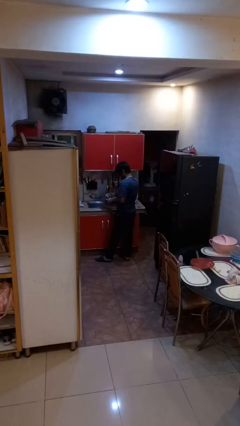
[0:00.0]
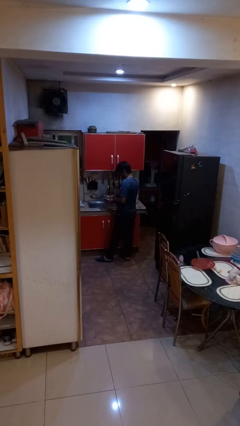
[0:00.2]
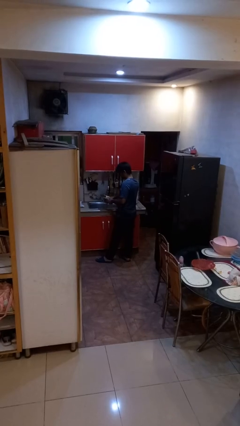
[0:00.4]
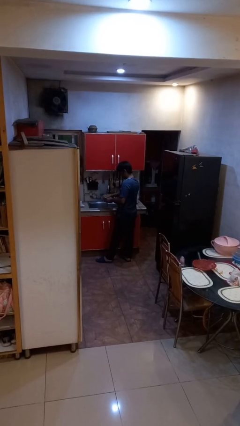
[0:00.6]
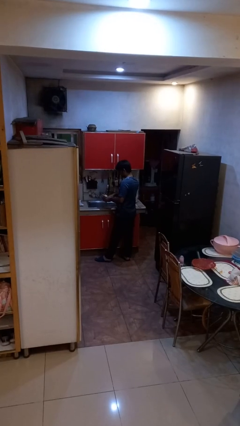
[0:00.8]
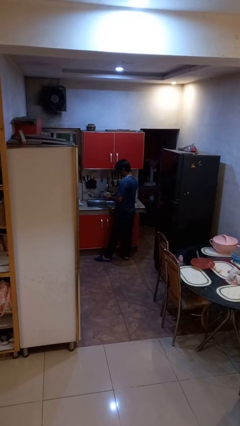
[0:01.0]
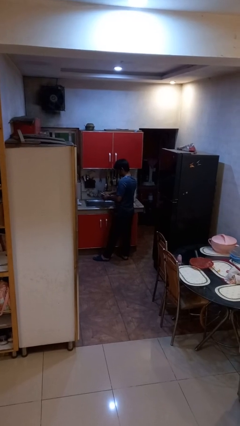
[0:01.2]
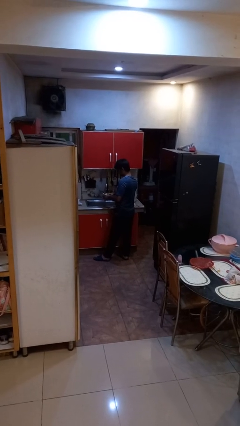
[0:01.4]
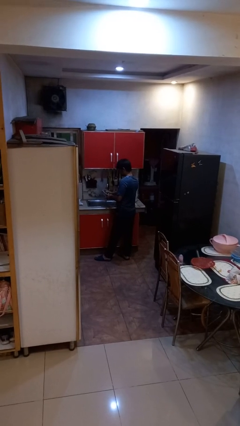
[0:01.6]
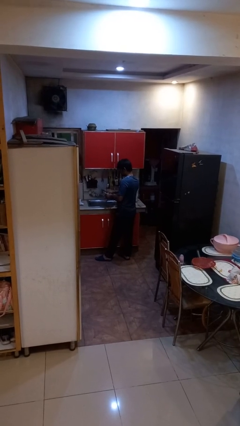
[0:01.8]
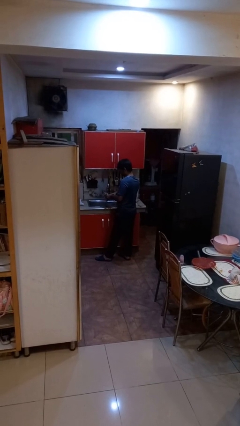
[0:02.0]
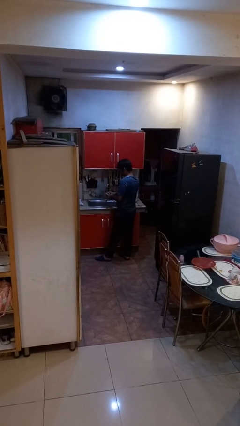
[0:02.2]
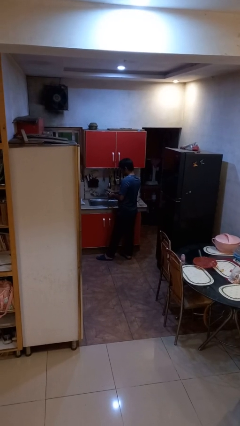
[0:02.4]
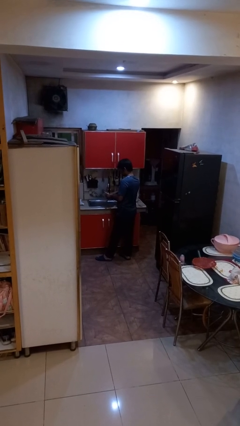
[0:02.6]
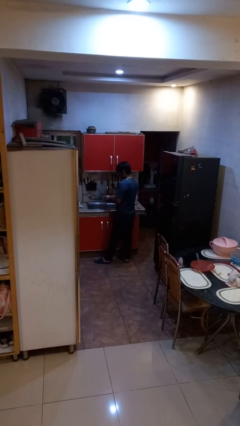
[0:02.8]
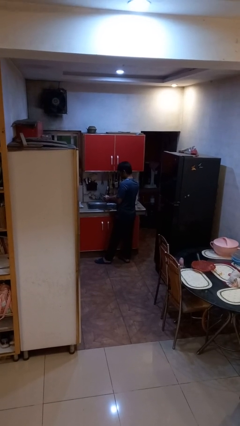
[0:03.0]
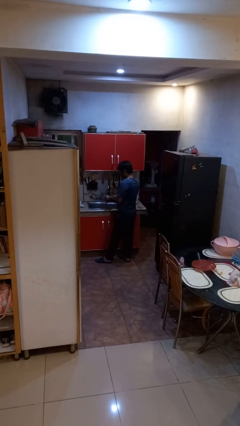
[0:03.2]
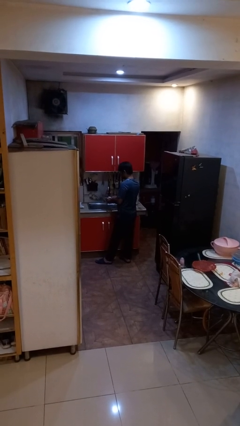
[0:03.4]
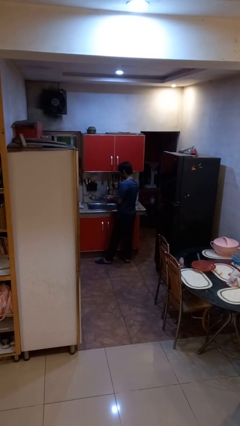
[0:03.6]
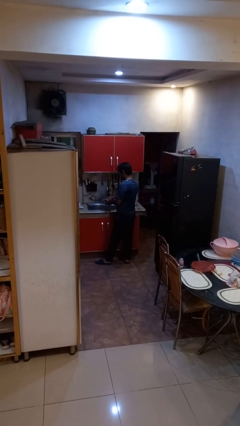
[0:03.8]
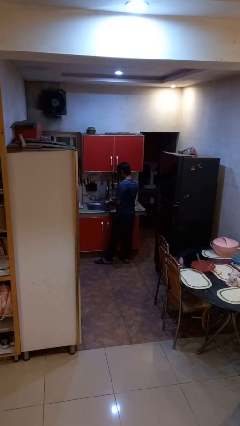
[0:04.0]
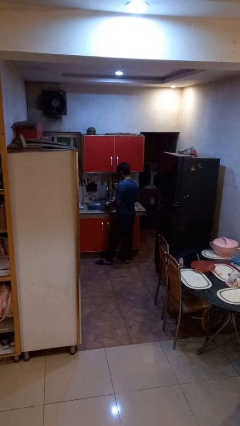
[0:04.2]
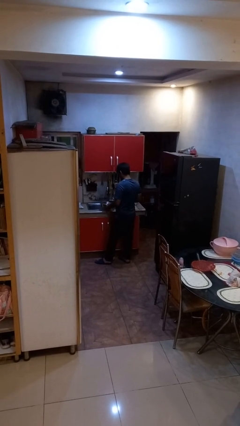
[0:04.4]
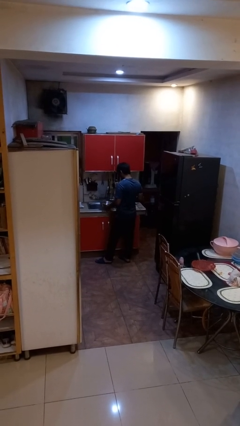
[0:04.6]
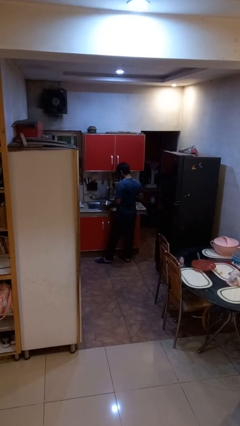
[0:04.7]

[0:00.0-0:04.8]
person washes dish

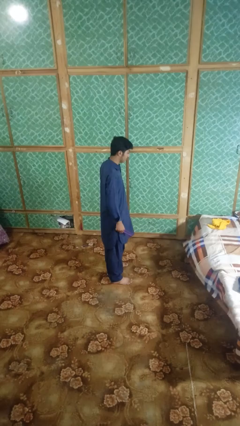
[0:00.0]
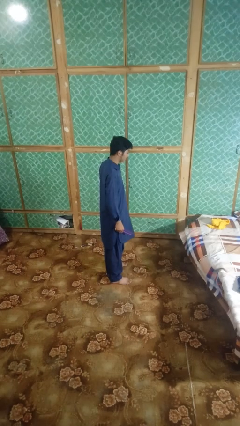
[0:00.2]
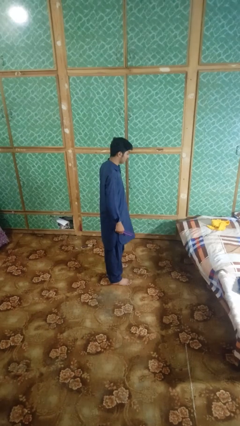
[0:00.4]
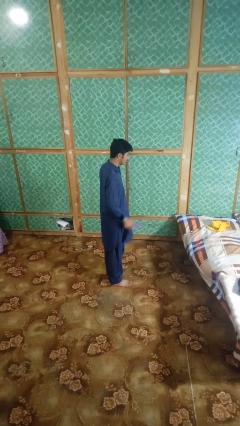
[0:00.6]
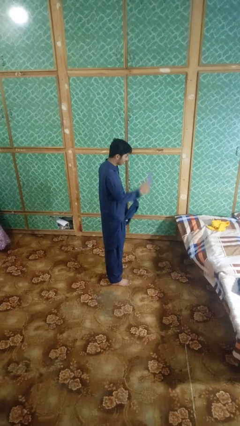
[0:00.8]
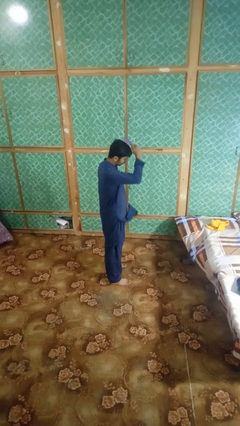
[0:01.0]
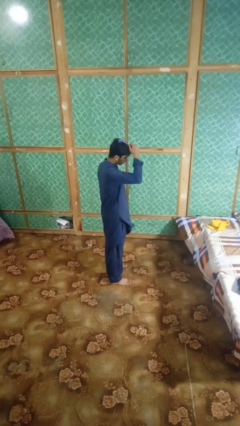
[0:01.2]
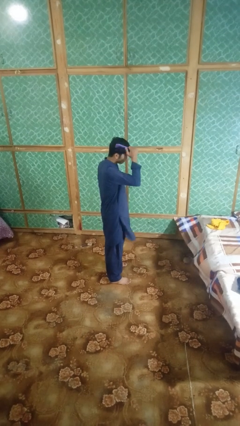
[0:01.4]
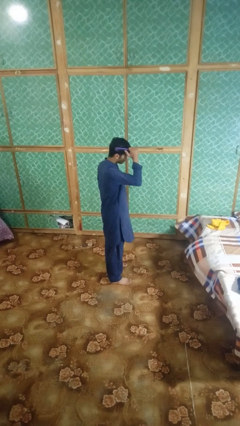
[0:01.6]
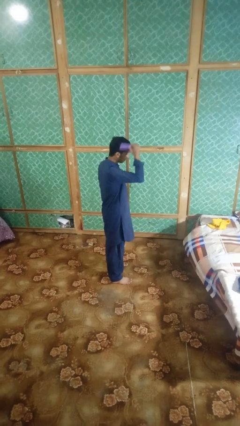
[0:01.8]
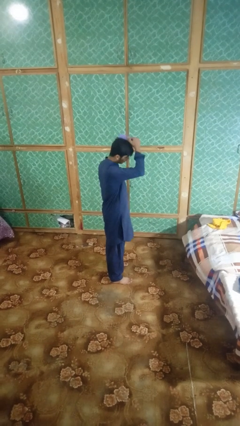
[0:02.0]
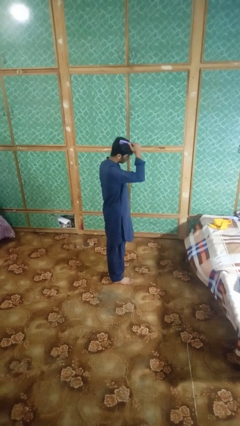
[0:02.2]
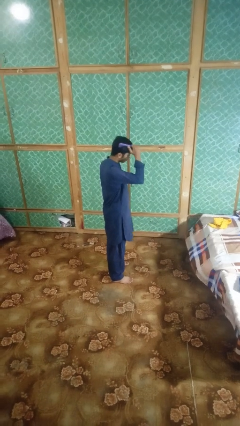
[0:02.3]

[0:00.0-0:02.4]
person brushes hair

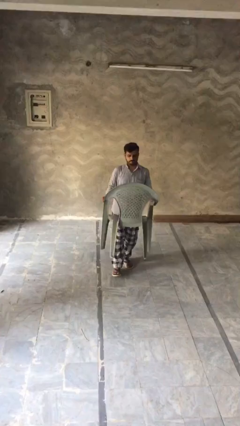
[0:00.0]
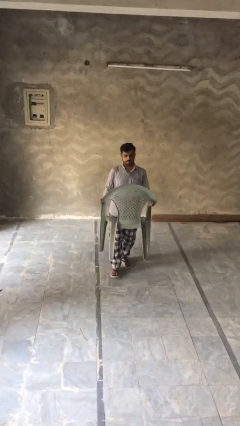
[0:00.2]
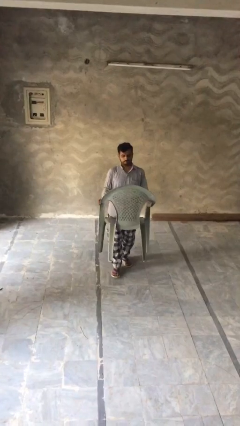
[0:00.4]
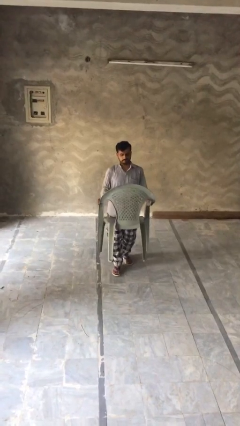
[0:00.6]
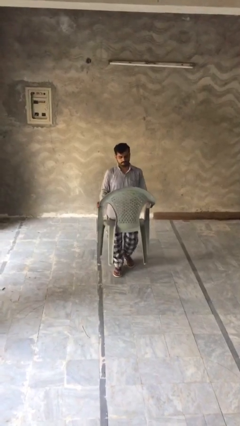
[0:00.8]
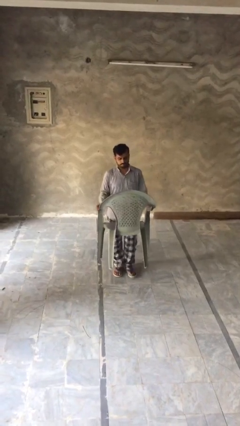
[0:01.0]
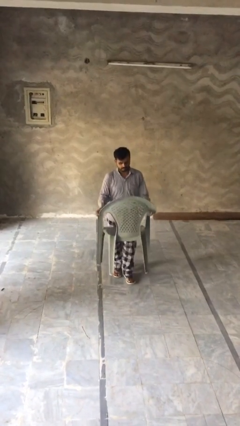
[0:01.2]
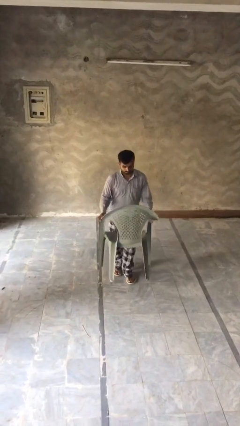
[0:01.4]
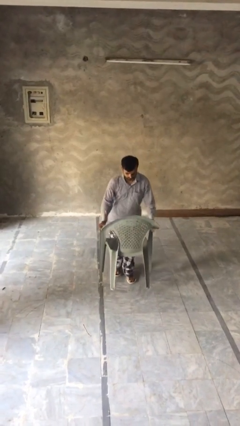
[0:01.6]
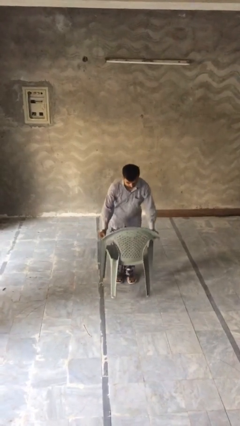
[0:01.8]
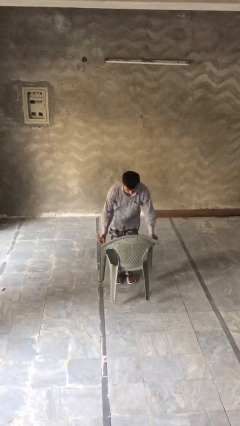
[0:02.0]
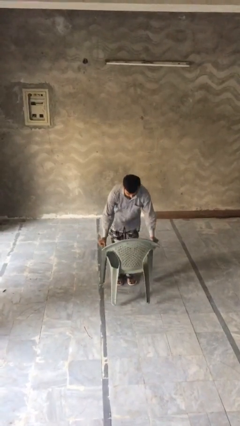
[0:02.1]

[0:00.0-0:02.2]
person puts down object on floor

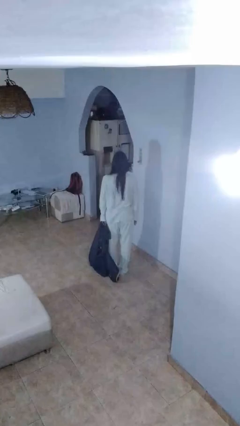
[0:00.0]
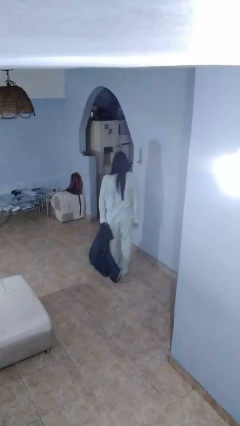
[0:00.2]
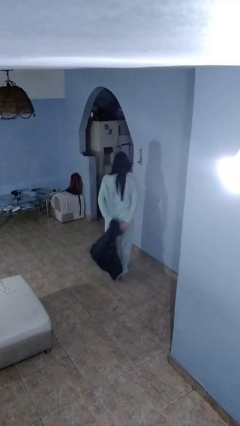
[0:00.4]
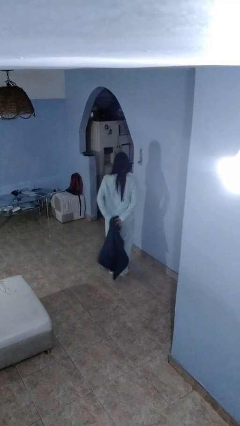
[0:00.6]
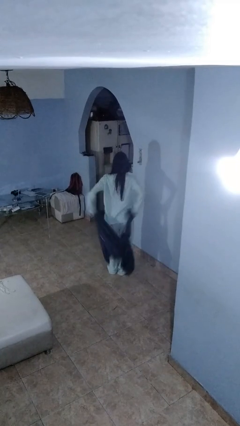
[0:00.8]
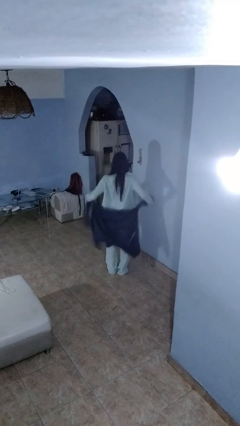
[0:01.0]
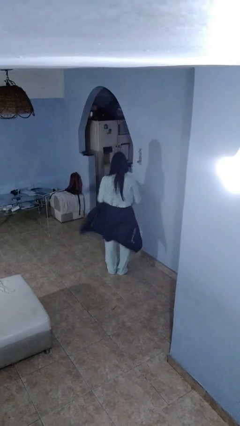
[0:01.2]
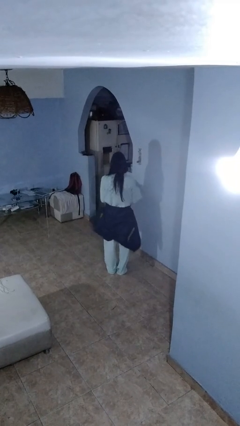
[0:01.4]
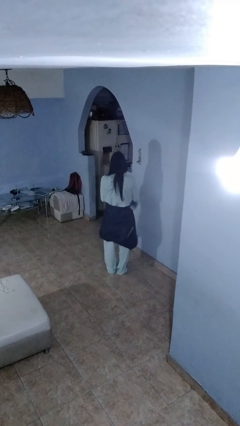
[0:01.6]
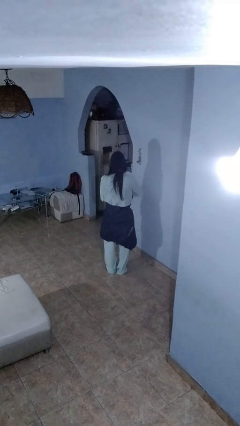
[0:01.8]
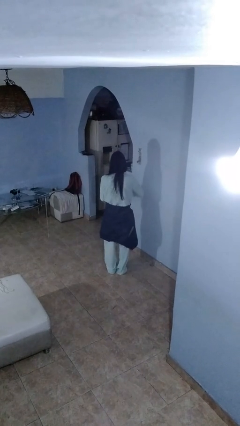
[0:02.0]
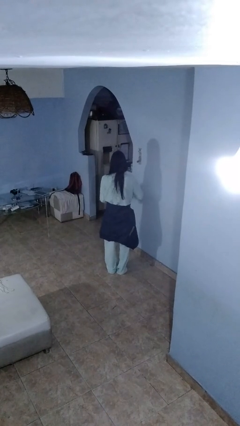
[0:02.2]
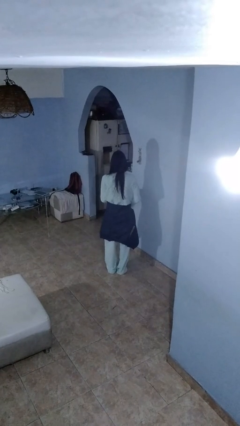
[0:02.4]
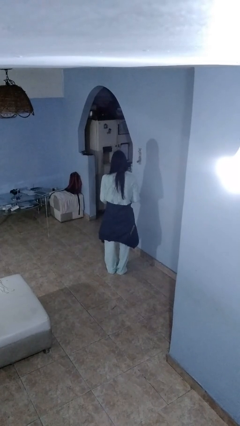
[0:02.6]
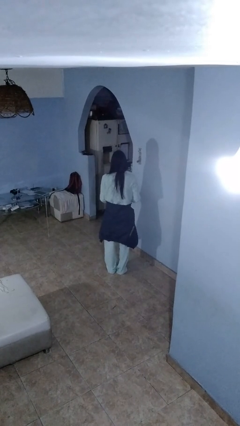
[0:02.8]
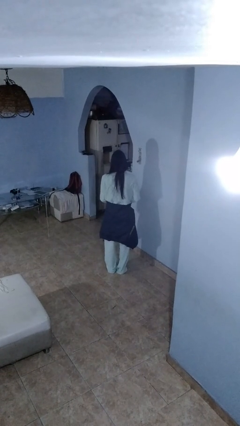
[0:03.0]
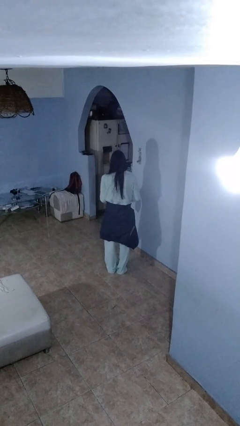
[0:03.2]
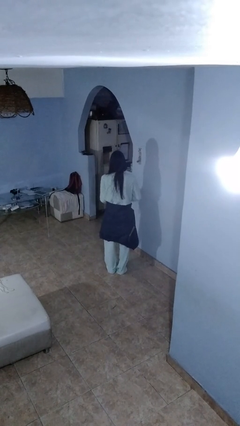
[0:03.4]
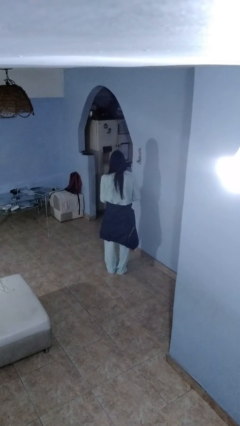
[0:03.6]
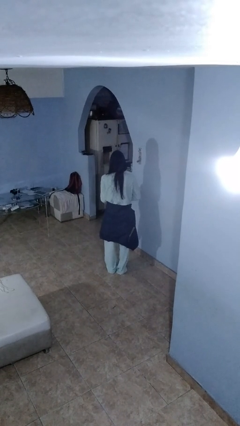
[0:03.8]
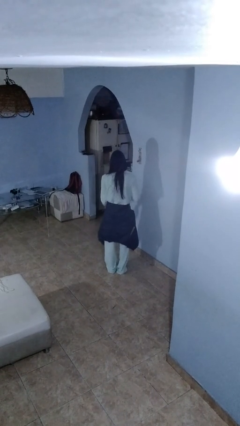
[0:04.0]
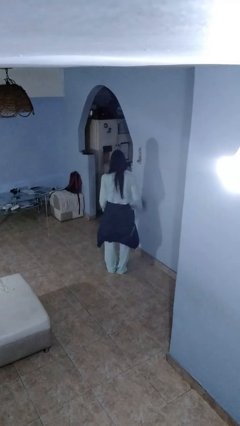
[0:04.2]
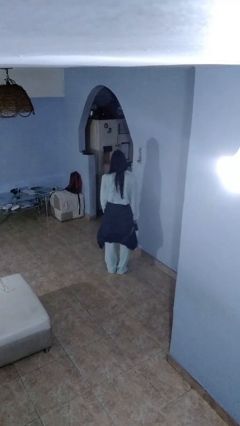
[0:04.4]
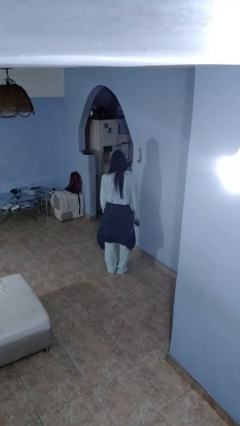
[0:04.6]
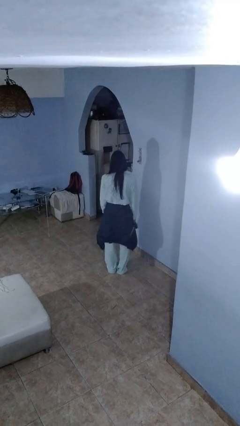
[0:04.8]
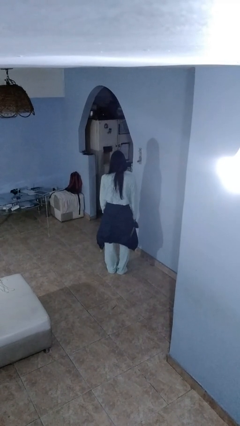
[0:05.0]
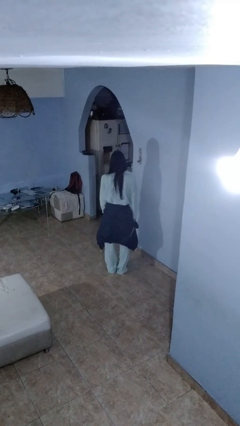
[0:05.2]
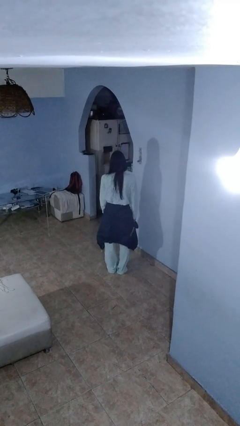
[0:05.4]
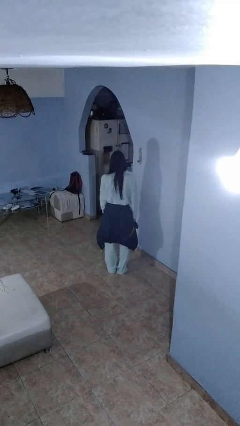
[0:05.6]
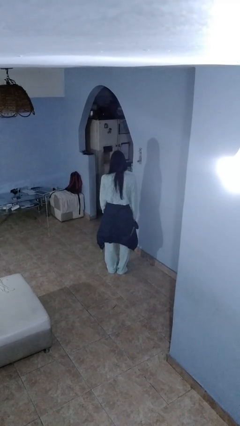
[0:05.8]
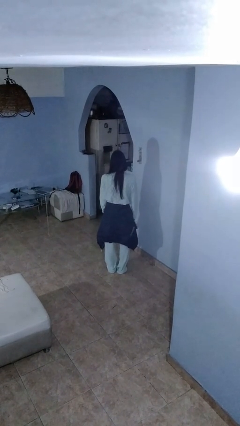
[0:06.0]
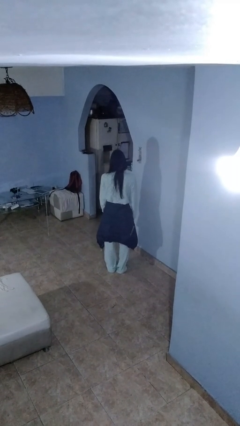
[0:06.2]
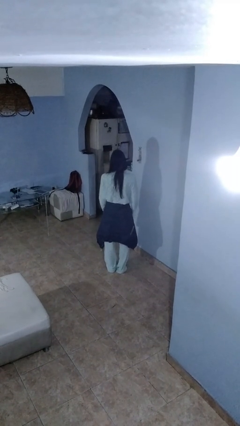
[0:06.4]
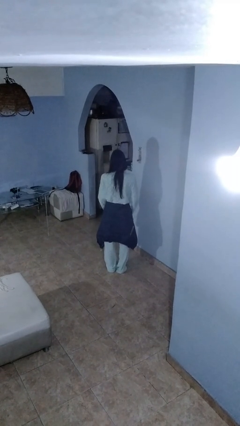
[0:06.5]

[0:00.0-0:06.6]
person ties jacket around waist

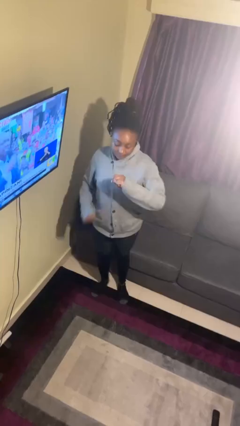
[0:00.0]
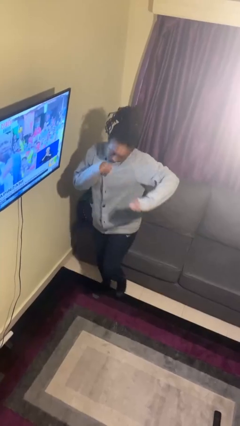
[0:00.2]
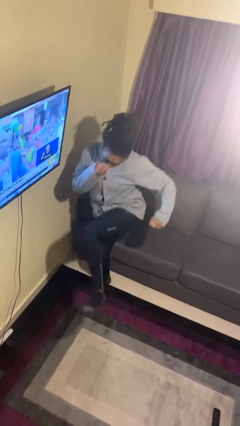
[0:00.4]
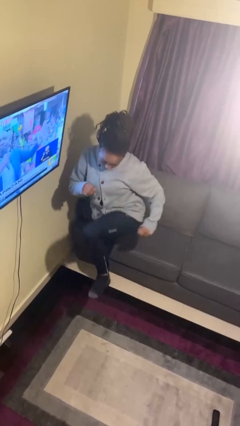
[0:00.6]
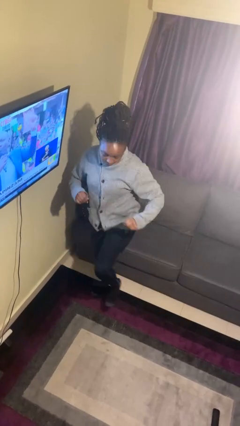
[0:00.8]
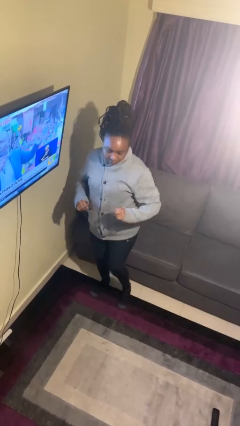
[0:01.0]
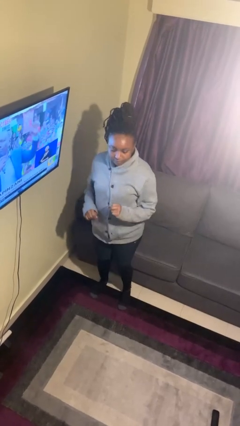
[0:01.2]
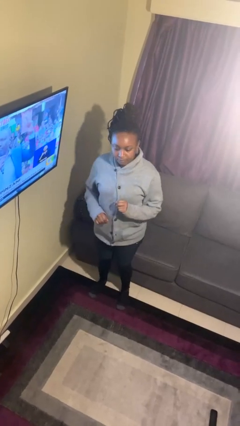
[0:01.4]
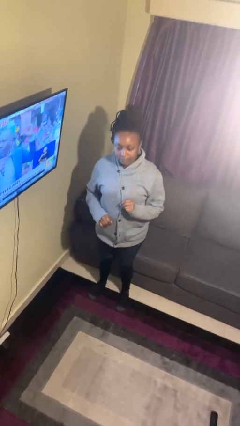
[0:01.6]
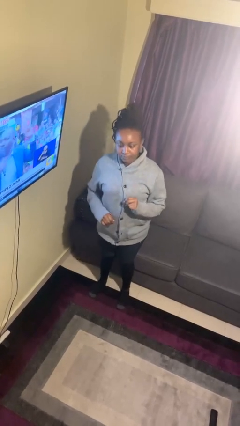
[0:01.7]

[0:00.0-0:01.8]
person karate kicks
